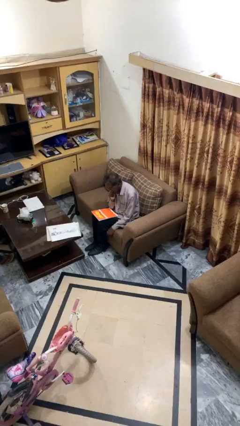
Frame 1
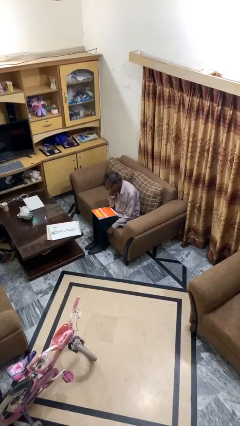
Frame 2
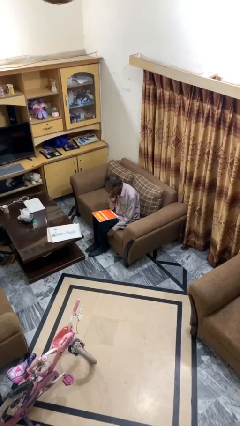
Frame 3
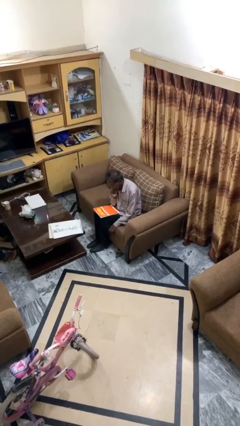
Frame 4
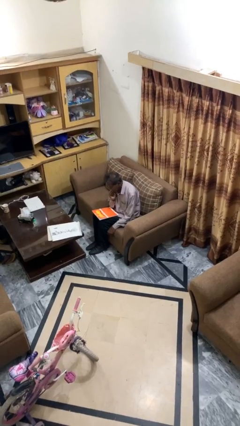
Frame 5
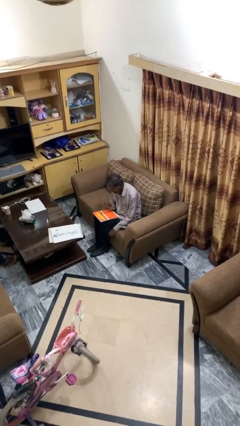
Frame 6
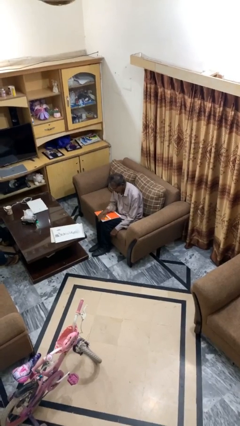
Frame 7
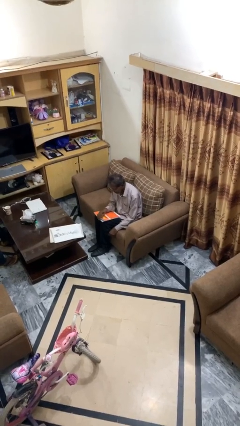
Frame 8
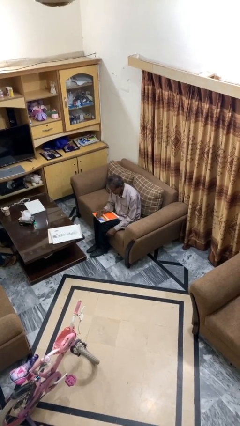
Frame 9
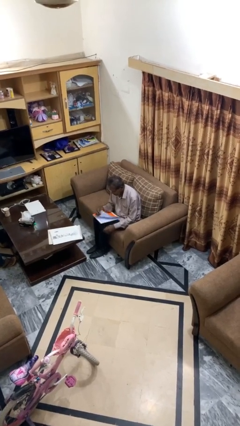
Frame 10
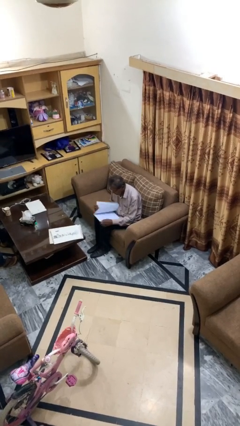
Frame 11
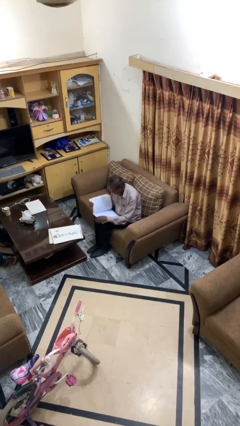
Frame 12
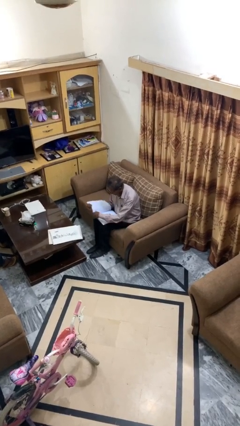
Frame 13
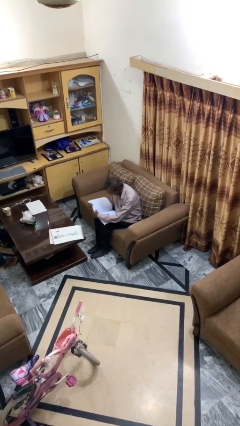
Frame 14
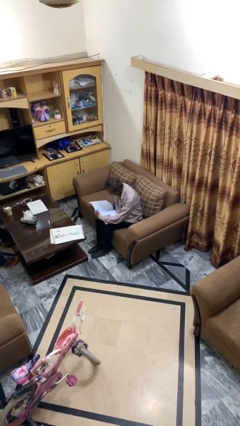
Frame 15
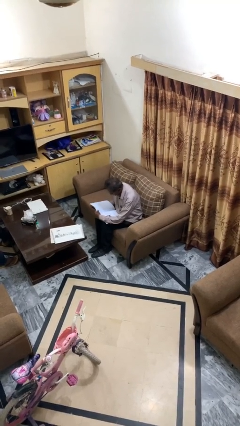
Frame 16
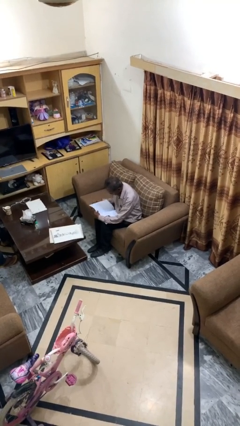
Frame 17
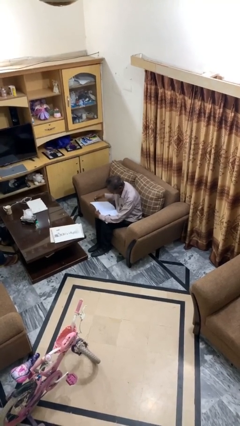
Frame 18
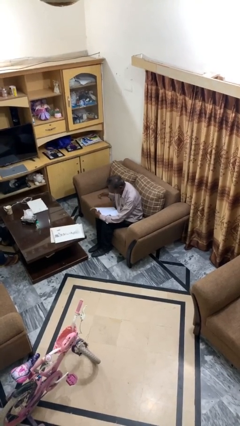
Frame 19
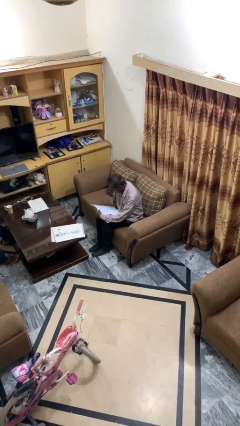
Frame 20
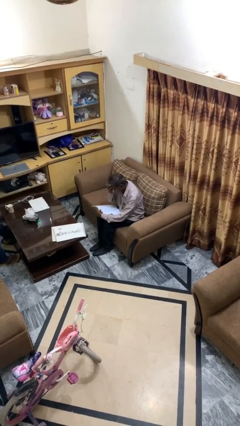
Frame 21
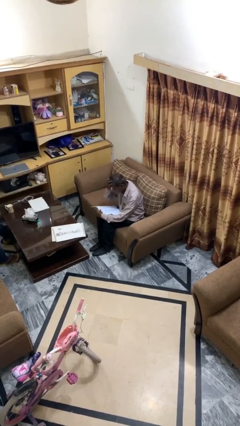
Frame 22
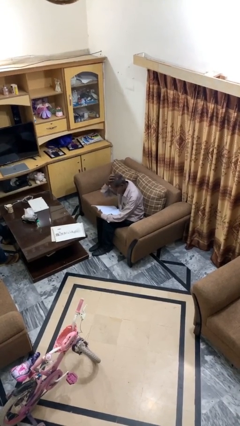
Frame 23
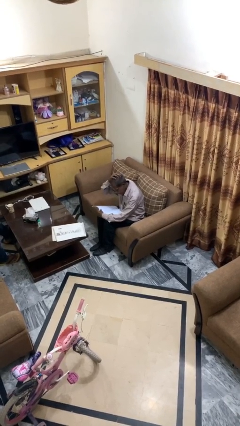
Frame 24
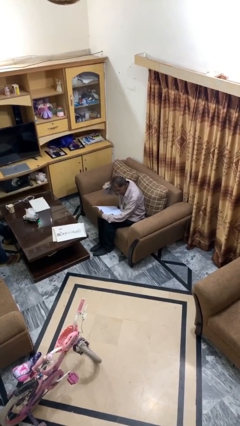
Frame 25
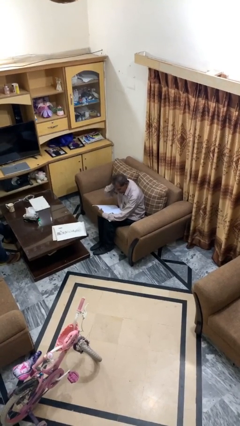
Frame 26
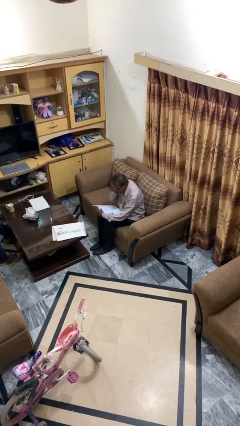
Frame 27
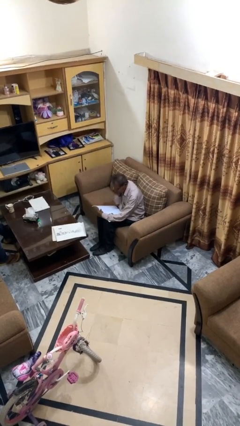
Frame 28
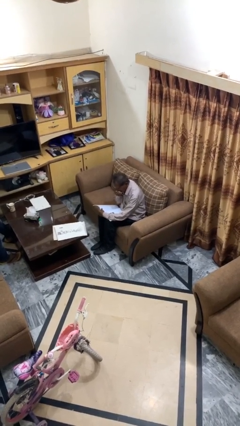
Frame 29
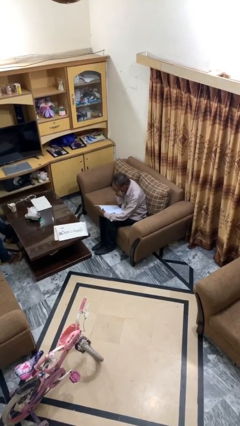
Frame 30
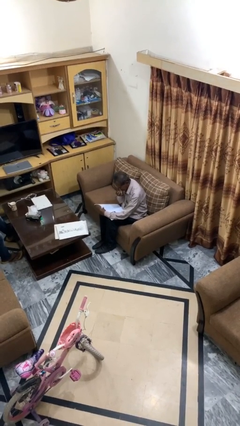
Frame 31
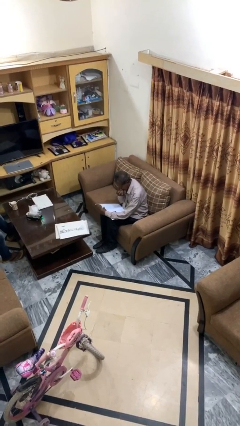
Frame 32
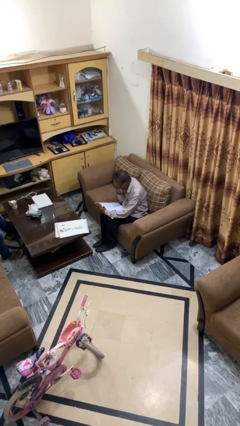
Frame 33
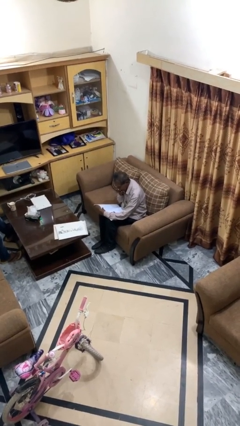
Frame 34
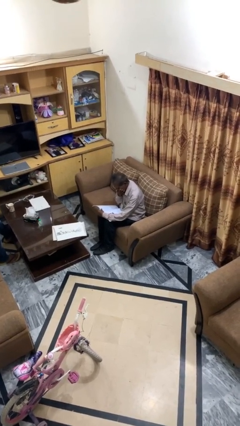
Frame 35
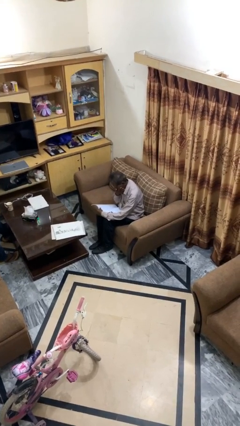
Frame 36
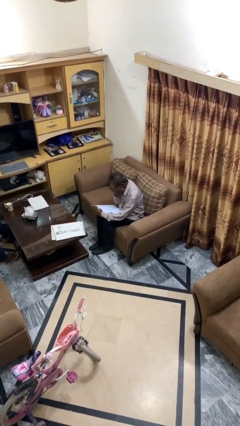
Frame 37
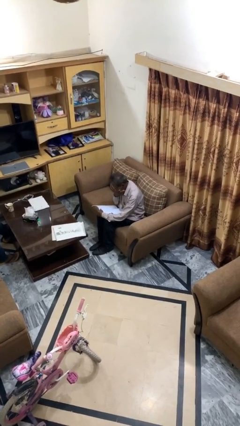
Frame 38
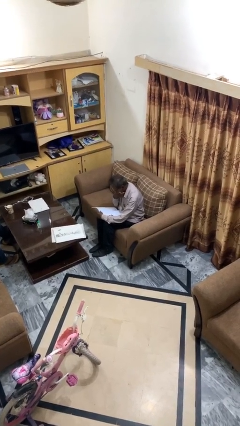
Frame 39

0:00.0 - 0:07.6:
person reads document

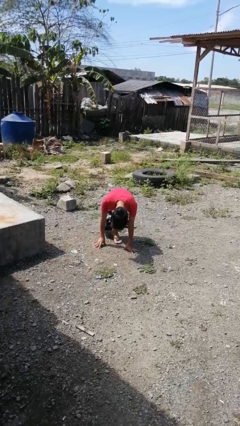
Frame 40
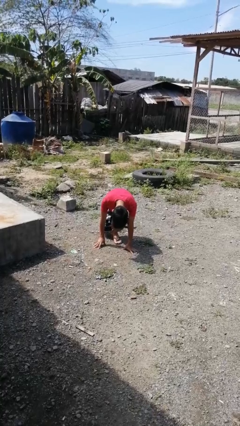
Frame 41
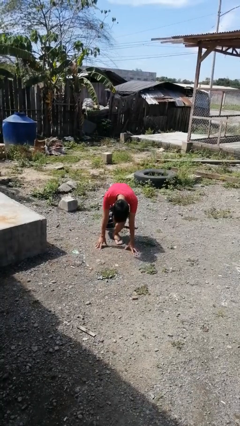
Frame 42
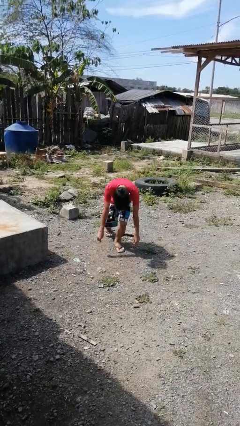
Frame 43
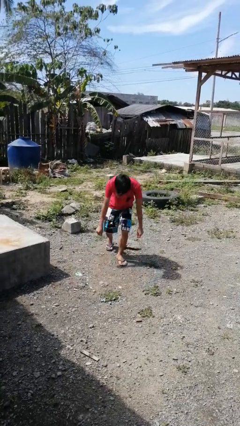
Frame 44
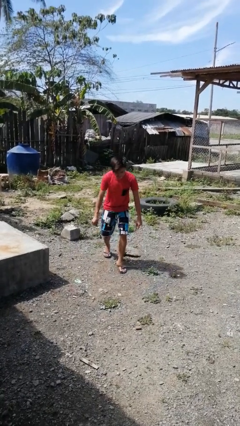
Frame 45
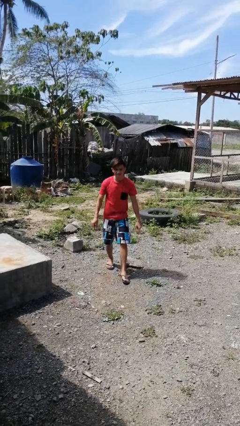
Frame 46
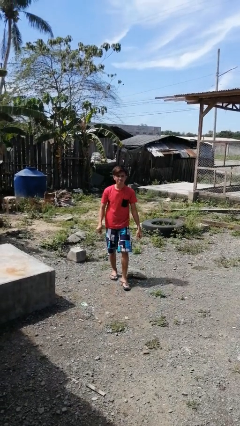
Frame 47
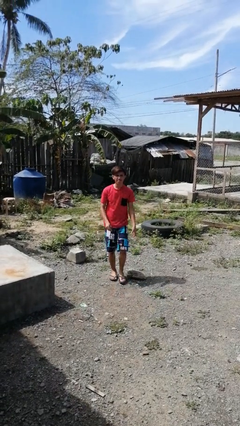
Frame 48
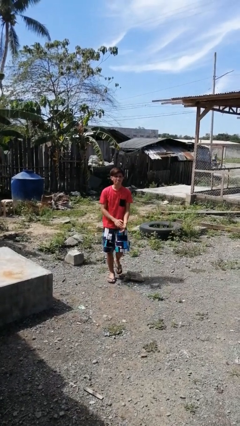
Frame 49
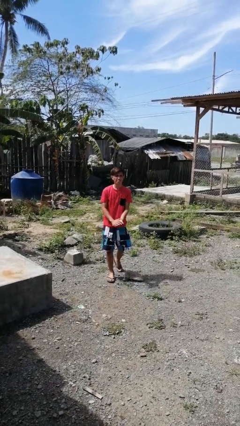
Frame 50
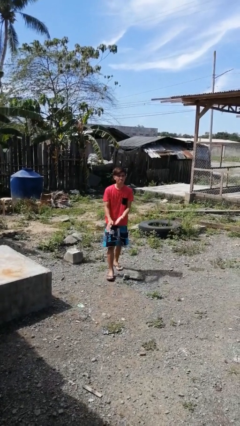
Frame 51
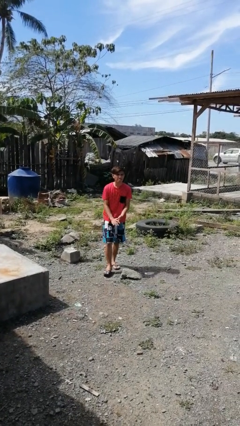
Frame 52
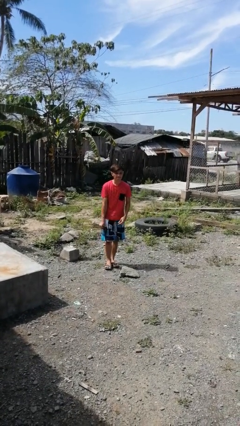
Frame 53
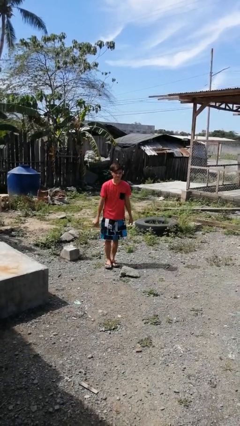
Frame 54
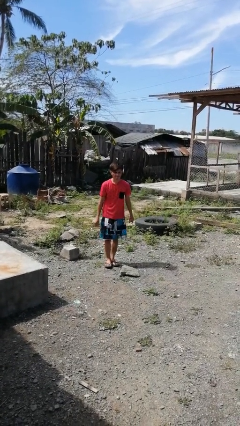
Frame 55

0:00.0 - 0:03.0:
person stands up from floor

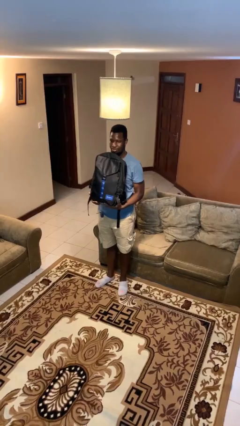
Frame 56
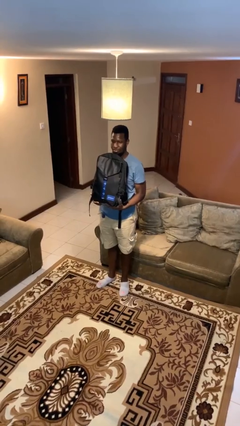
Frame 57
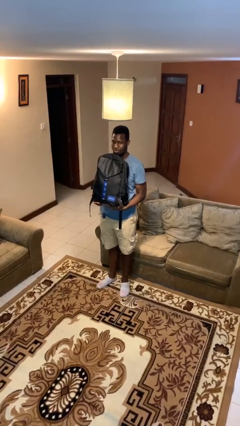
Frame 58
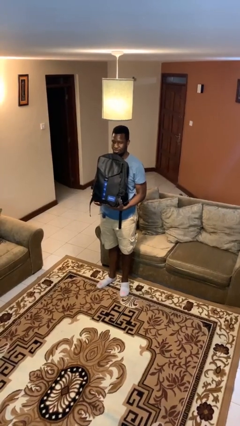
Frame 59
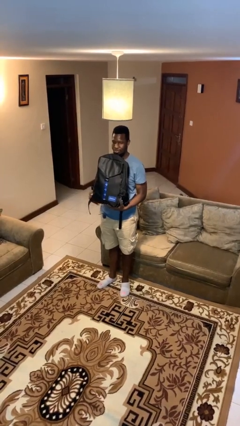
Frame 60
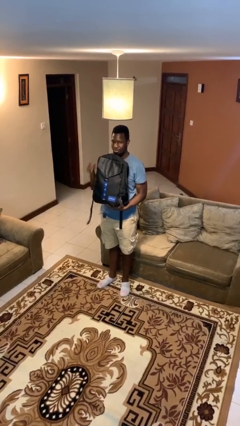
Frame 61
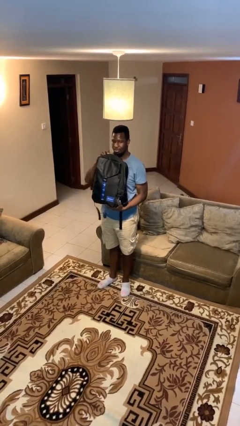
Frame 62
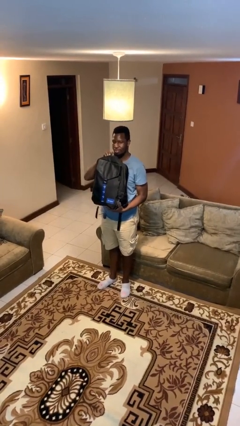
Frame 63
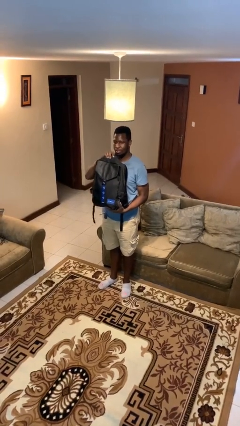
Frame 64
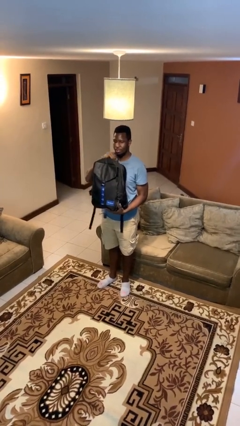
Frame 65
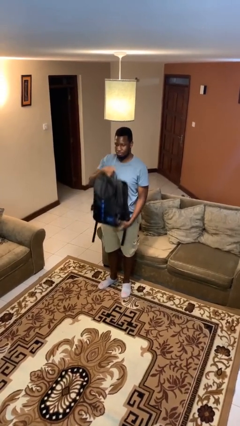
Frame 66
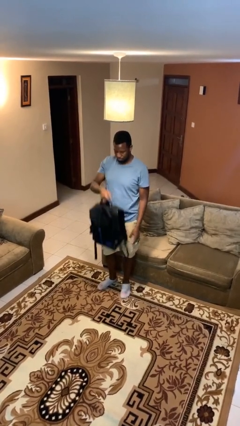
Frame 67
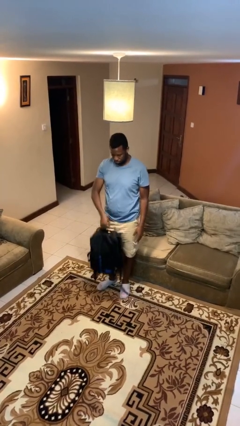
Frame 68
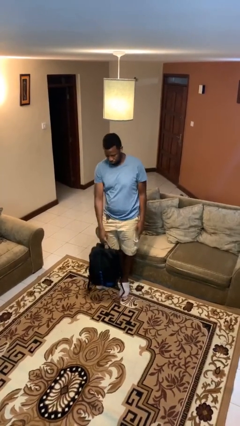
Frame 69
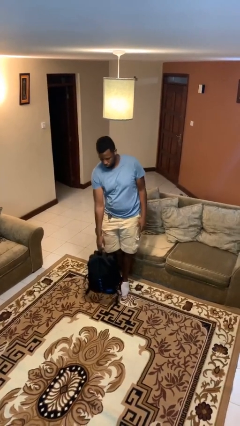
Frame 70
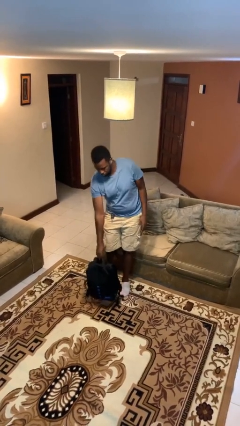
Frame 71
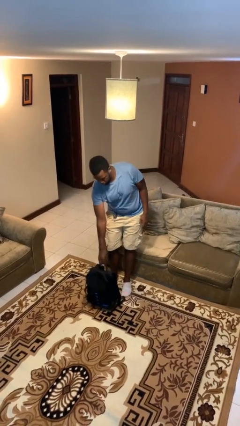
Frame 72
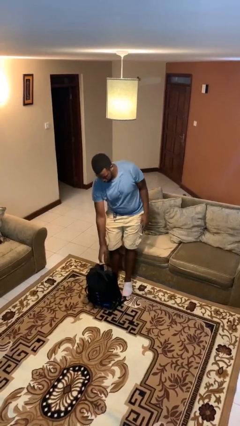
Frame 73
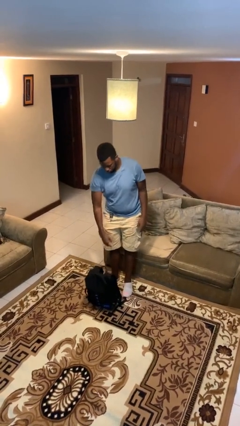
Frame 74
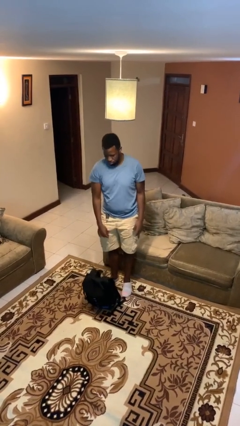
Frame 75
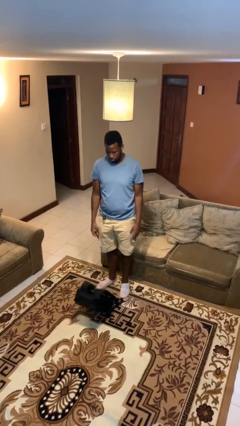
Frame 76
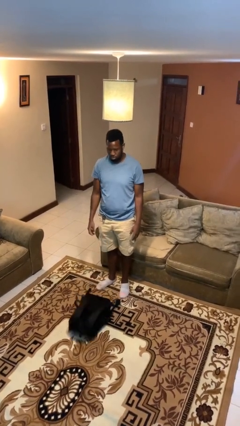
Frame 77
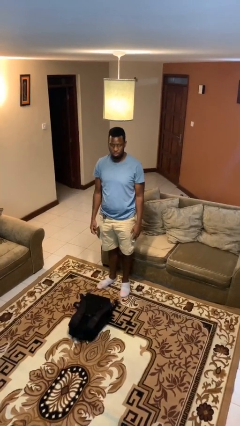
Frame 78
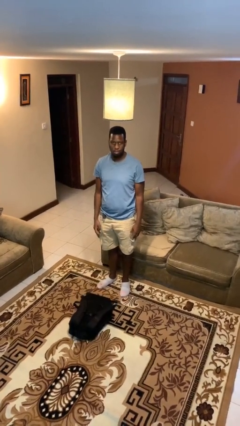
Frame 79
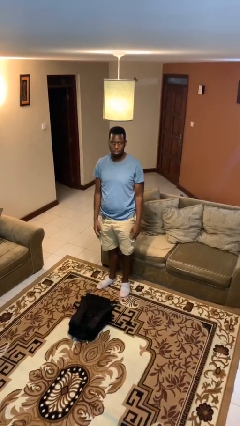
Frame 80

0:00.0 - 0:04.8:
person puts down object on floor

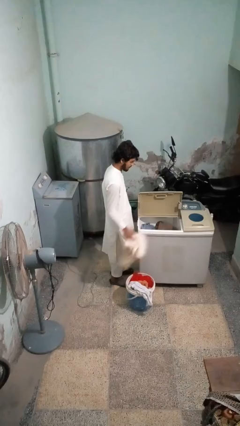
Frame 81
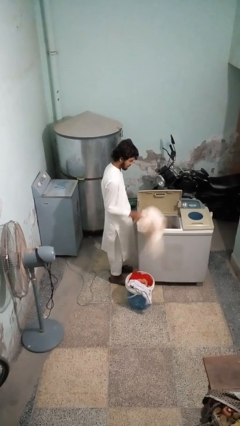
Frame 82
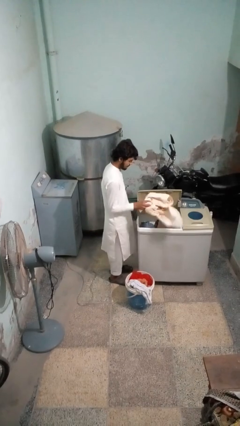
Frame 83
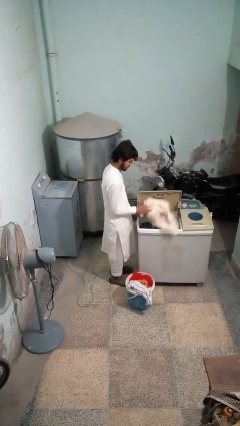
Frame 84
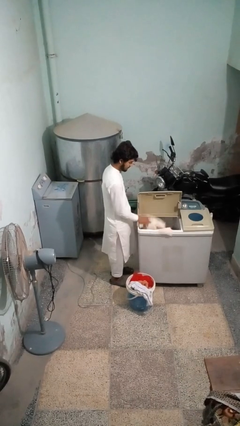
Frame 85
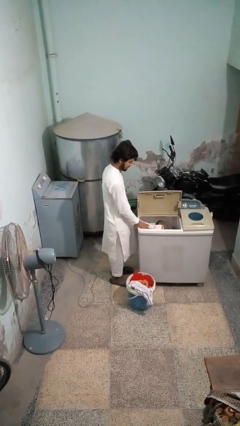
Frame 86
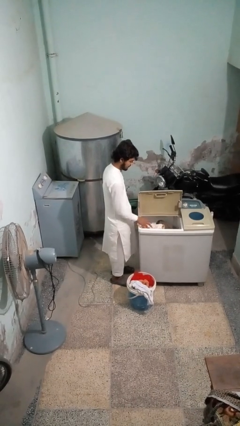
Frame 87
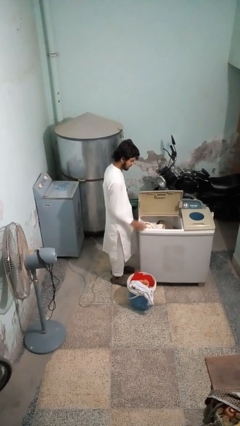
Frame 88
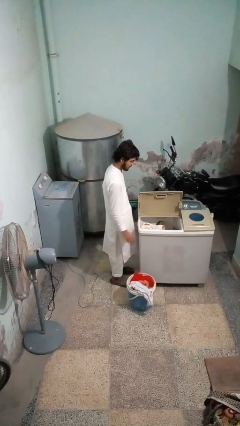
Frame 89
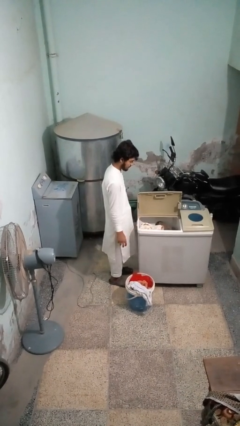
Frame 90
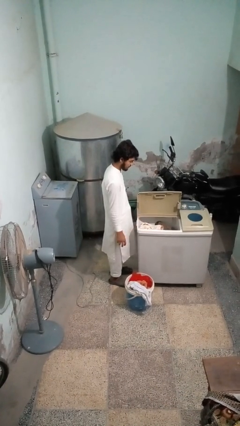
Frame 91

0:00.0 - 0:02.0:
person loads clotheswasher

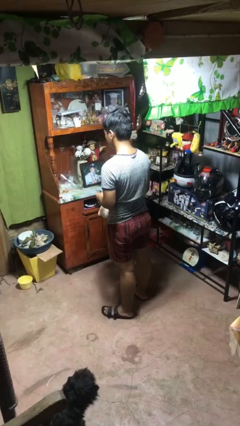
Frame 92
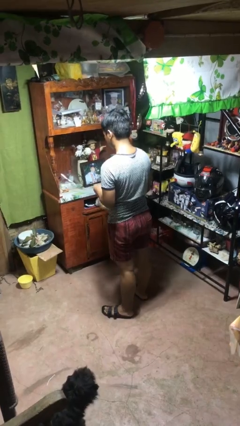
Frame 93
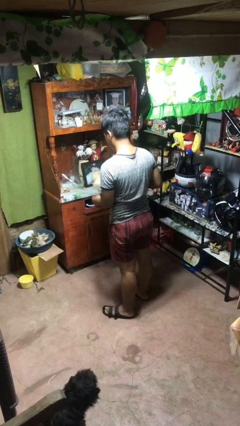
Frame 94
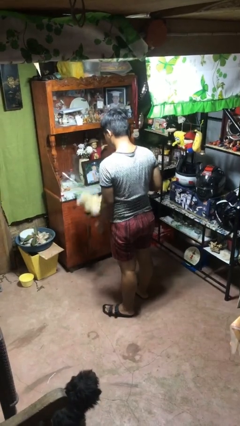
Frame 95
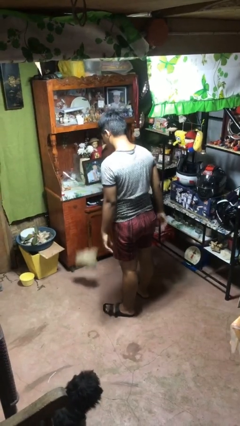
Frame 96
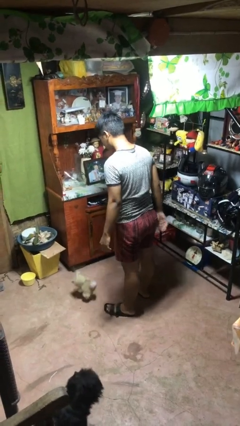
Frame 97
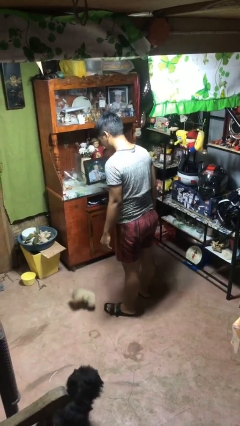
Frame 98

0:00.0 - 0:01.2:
person drops object
